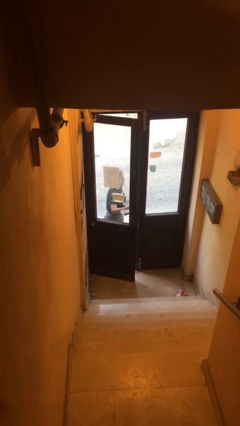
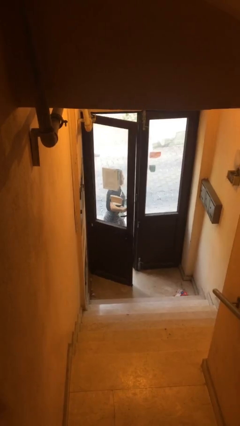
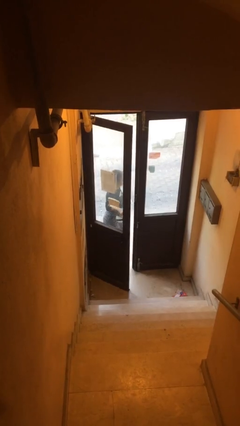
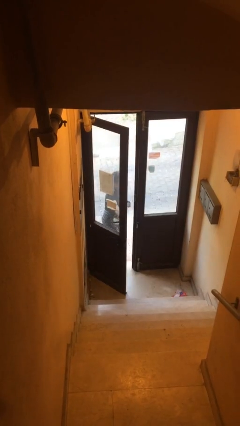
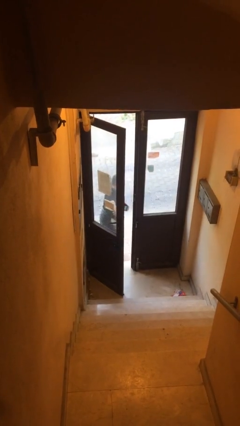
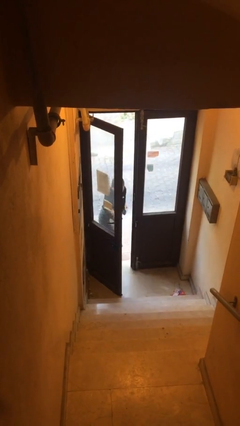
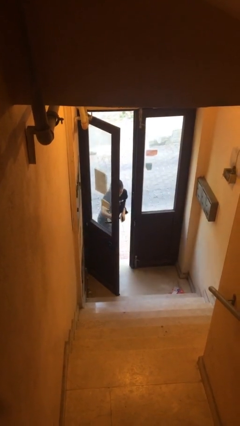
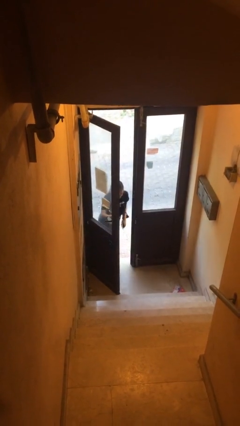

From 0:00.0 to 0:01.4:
person opens facility door

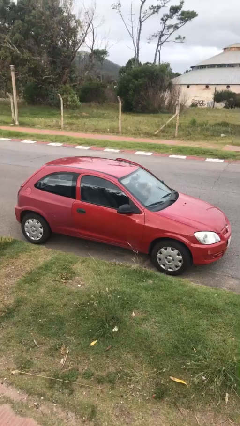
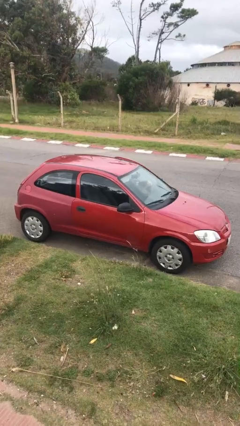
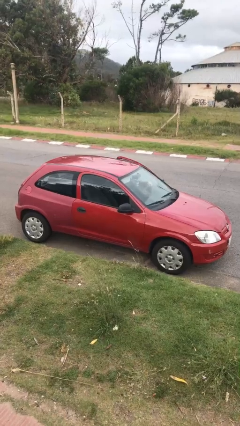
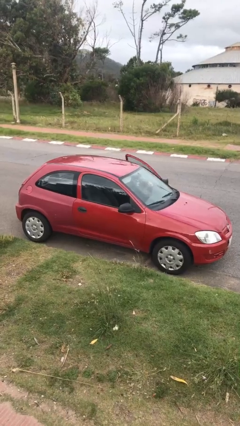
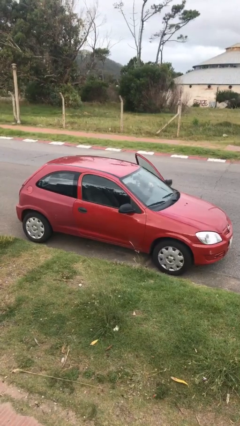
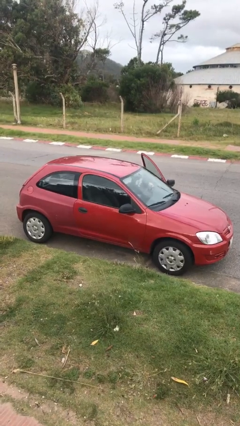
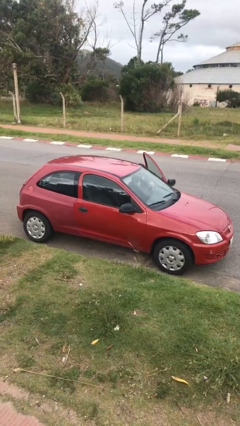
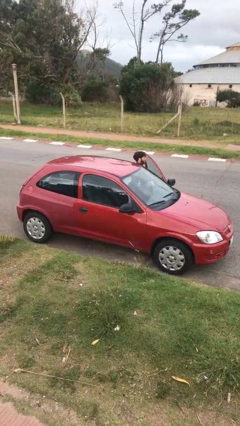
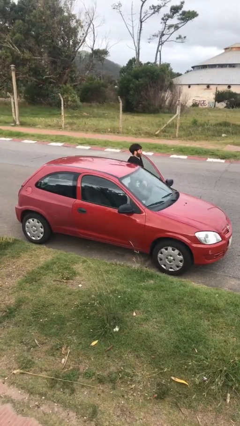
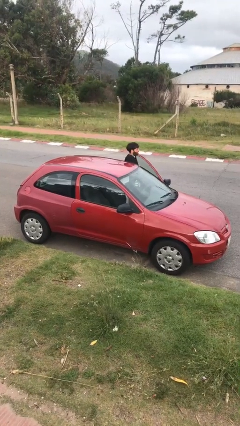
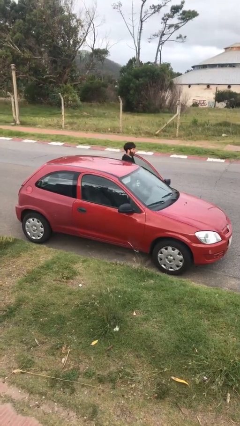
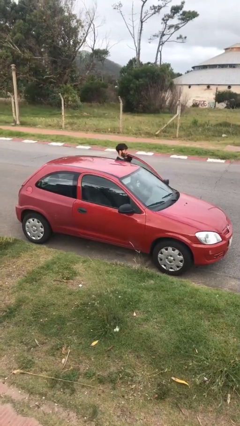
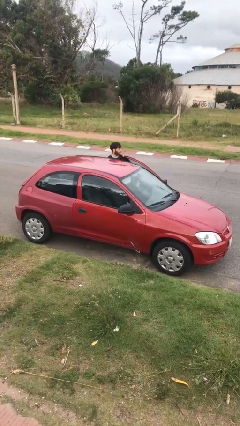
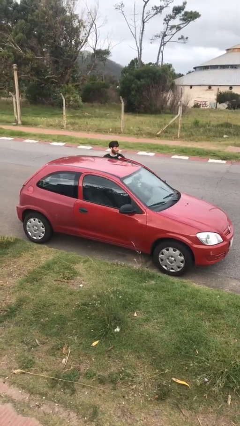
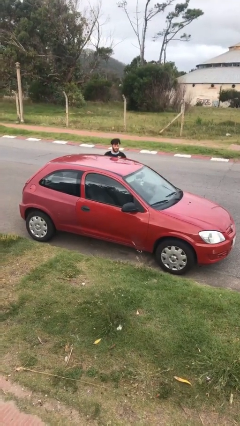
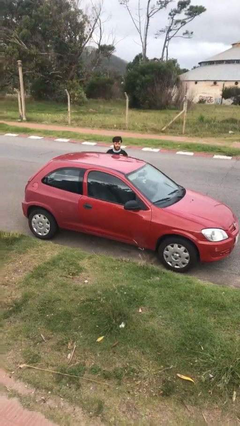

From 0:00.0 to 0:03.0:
car drops off person

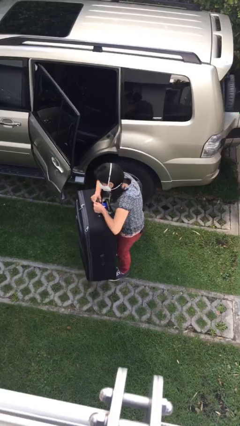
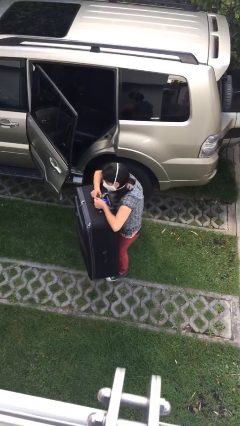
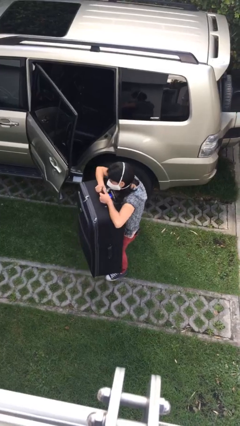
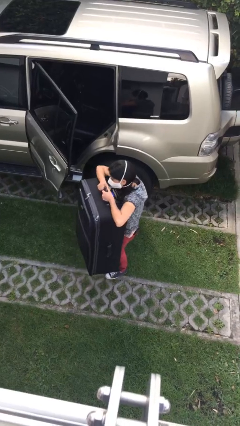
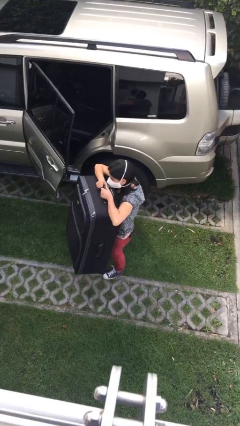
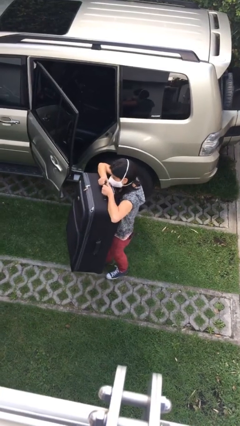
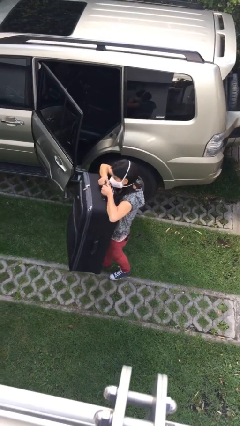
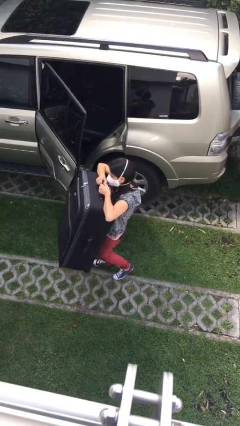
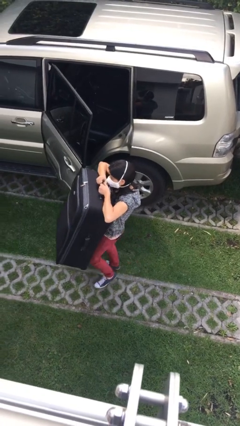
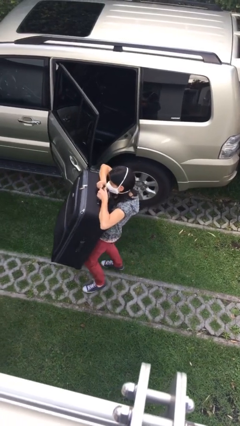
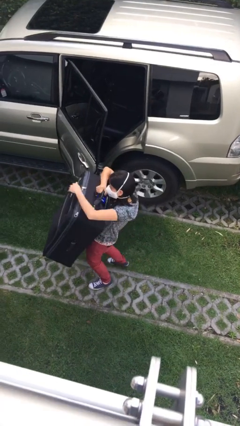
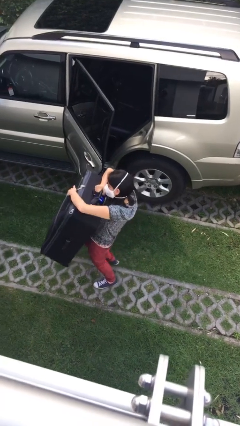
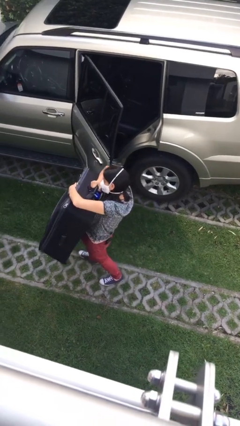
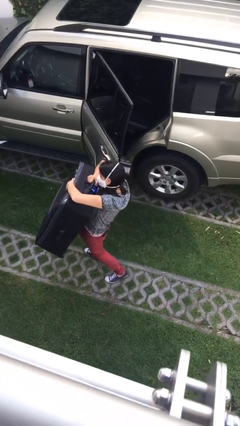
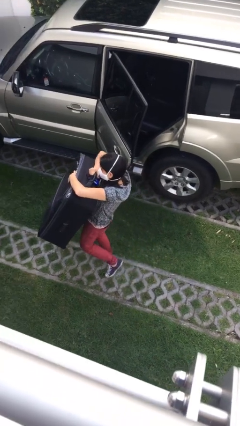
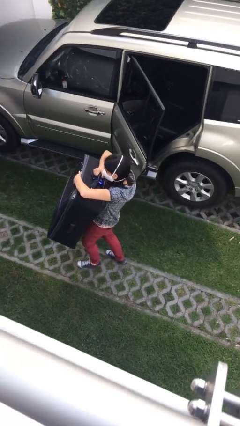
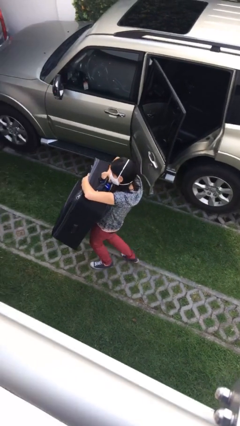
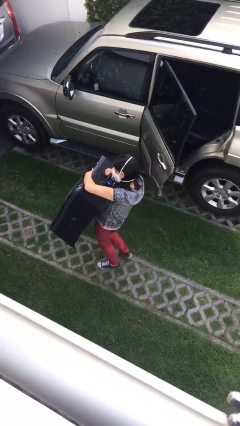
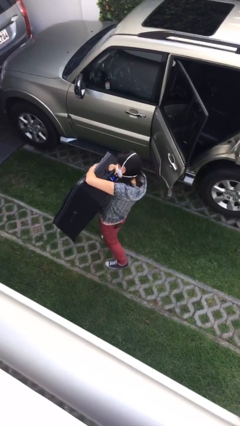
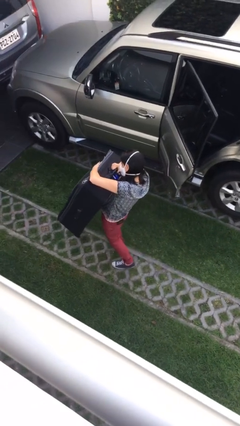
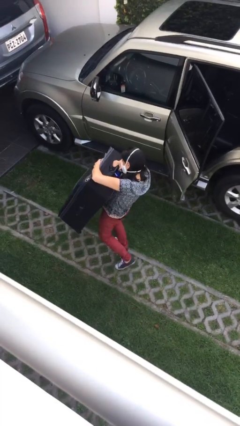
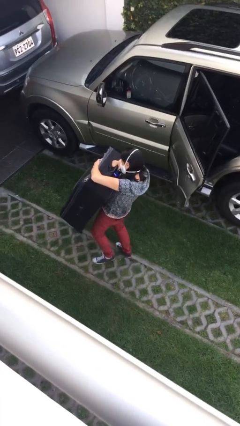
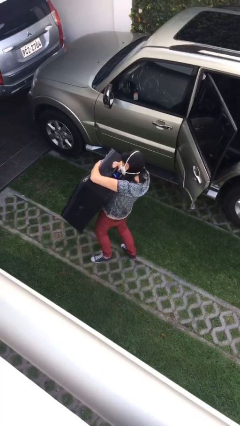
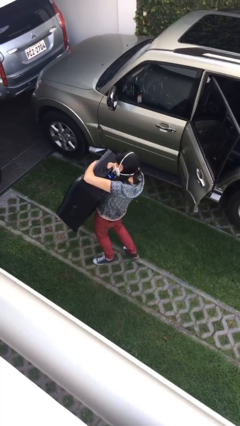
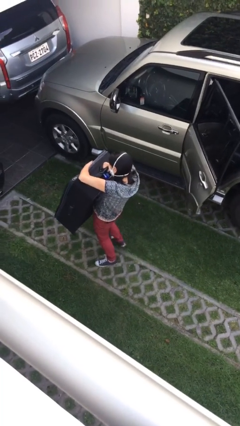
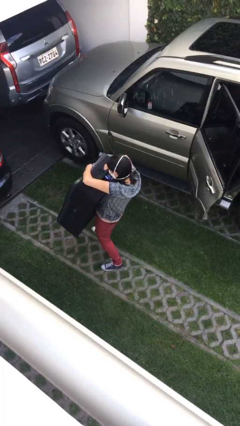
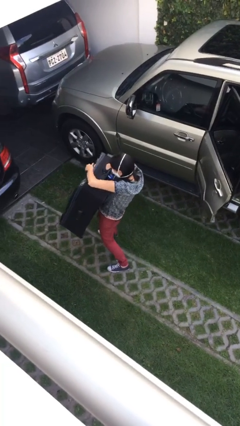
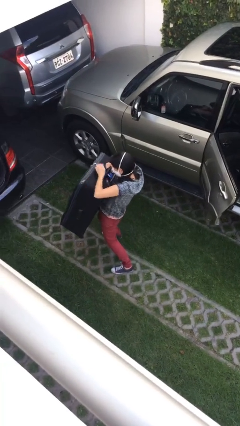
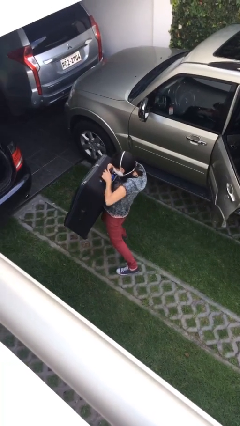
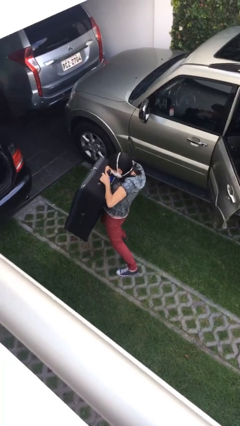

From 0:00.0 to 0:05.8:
person carries heavy object

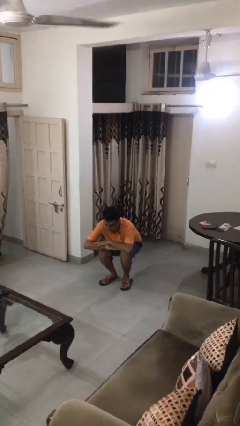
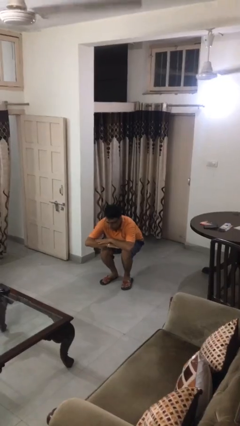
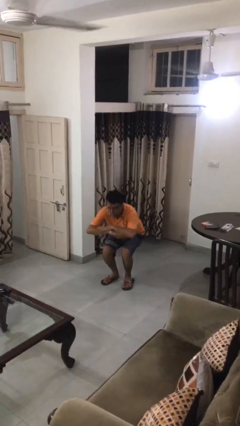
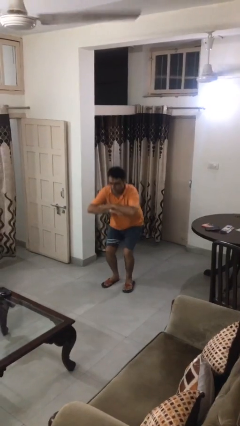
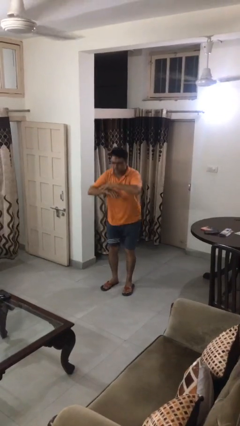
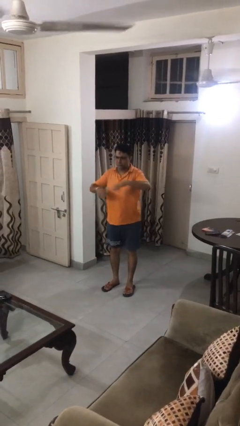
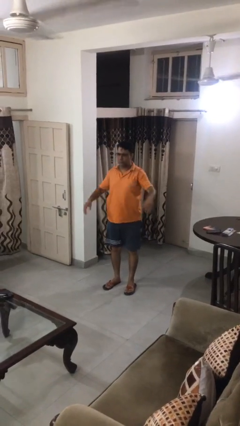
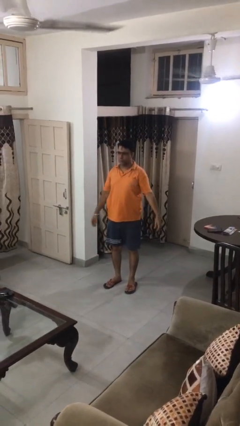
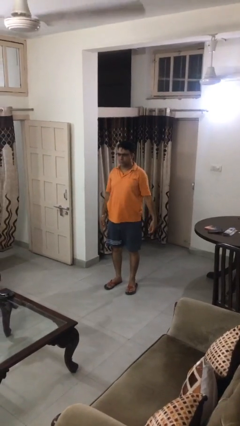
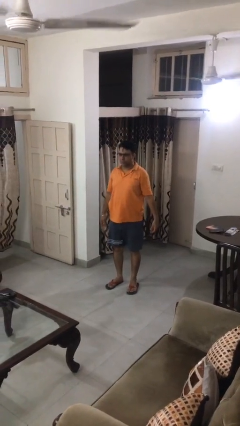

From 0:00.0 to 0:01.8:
person stands up

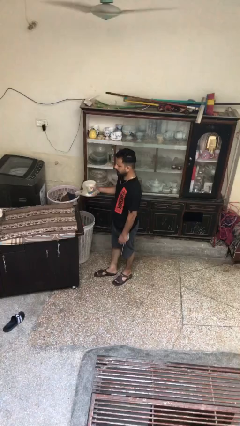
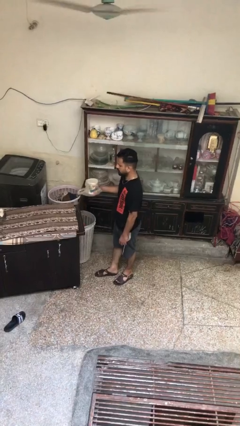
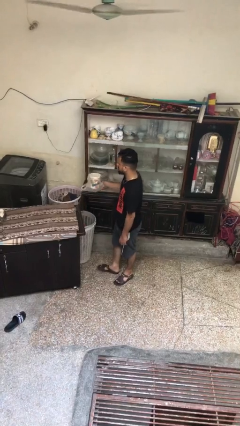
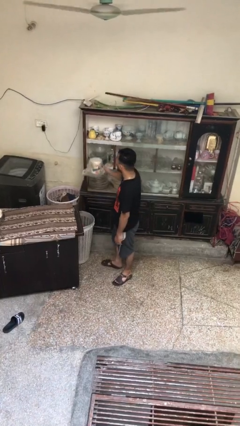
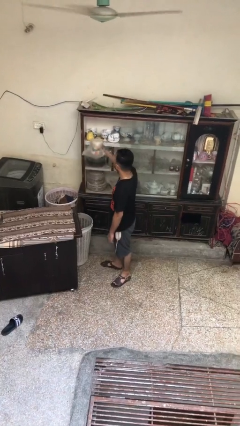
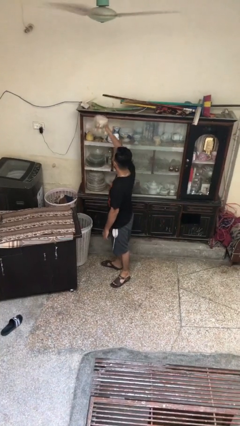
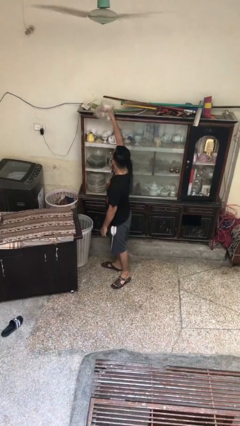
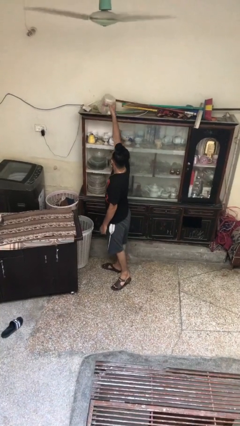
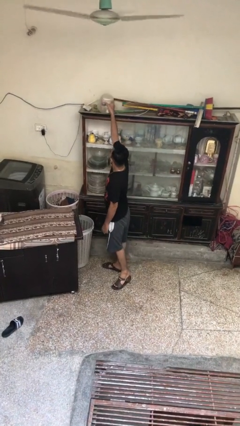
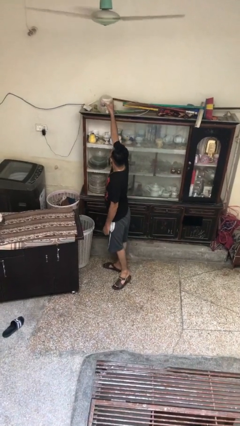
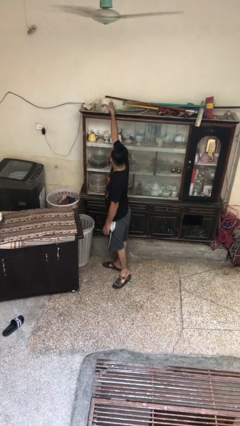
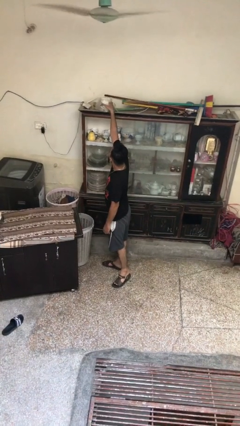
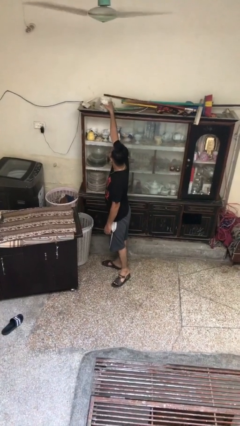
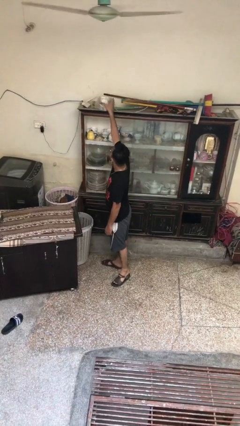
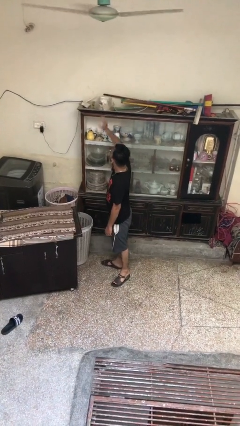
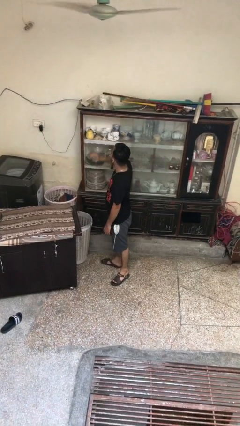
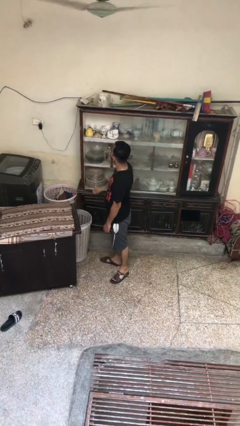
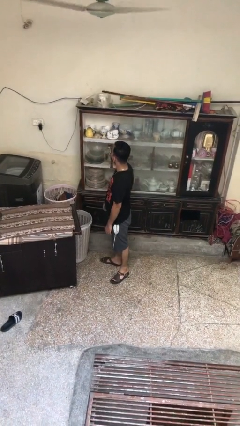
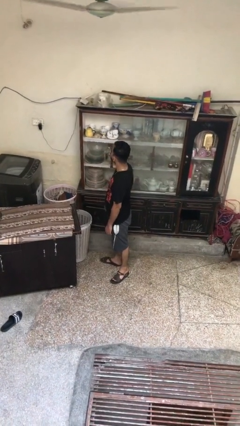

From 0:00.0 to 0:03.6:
person puts down object on shelf

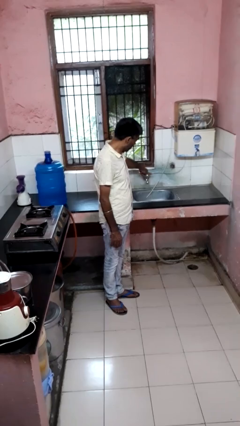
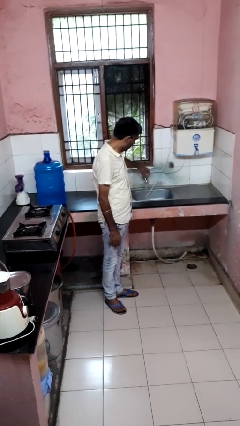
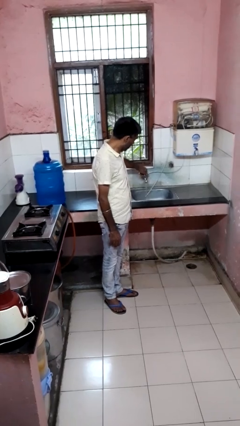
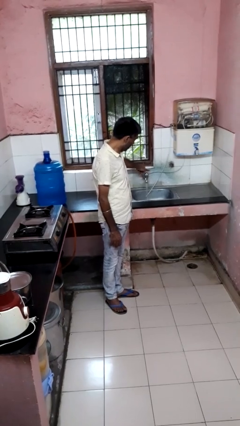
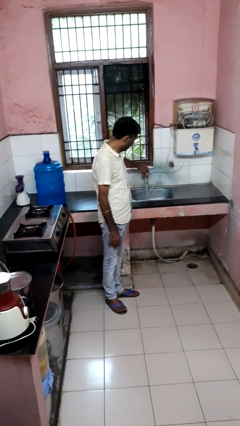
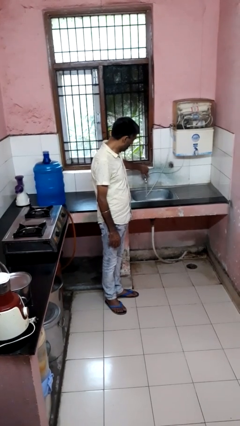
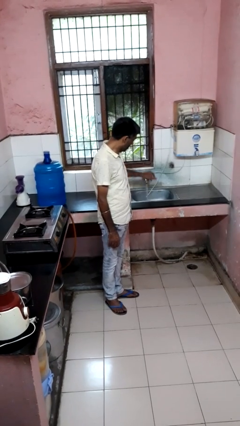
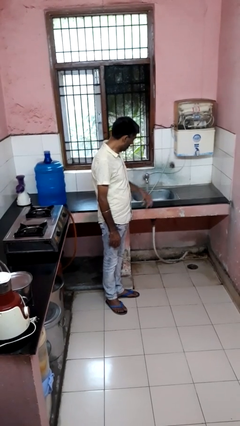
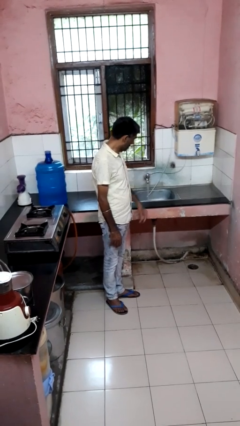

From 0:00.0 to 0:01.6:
person turns on faucet
